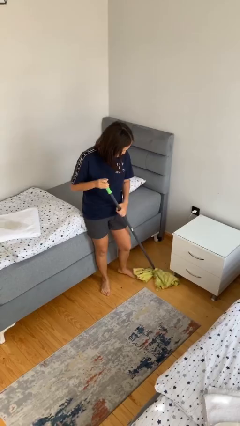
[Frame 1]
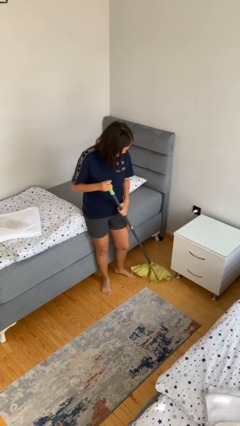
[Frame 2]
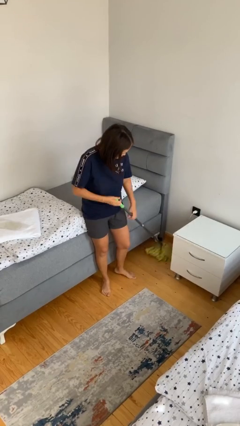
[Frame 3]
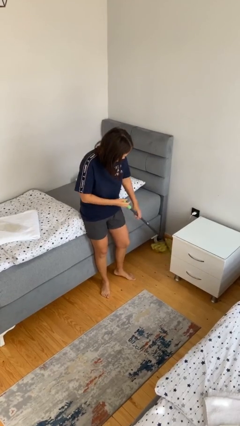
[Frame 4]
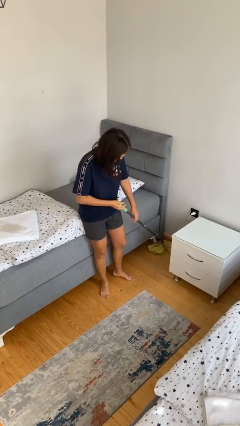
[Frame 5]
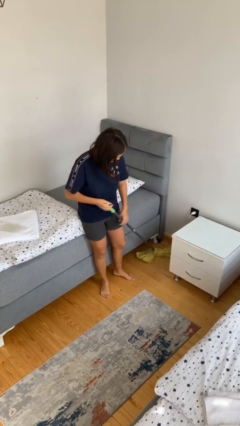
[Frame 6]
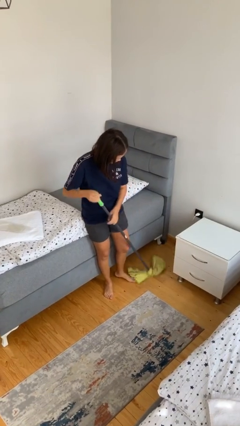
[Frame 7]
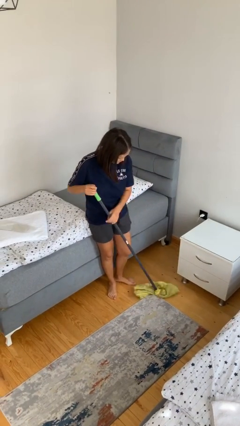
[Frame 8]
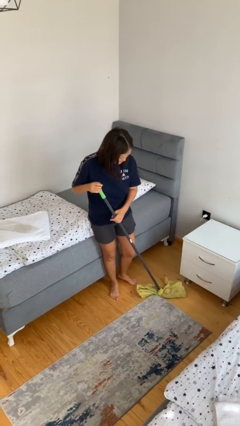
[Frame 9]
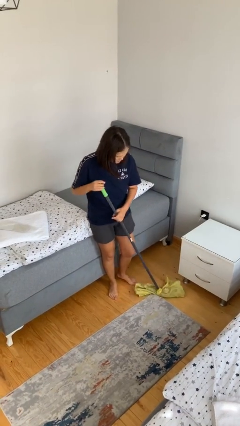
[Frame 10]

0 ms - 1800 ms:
person sweeps floor

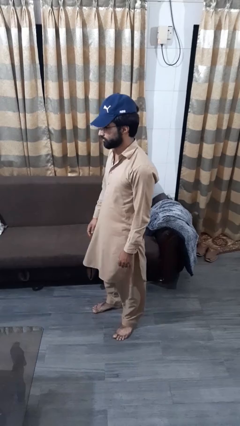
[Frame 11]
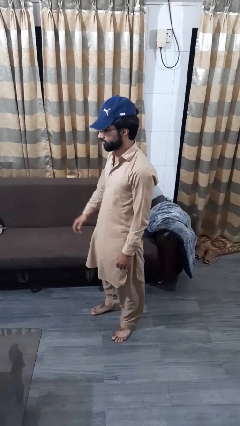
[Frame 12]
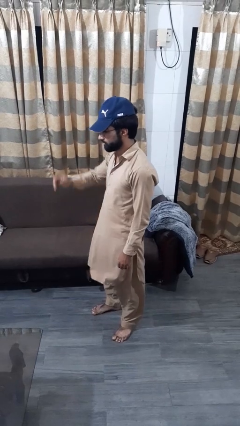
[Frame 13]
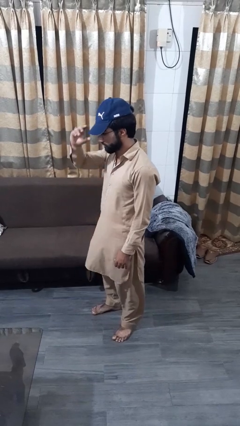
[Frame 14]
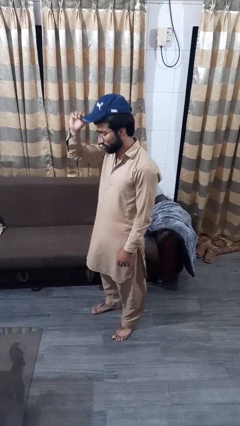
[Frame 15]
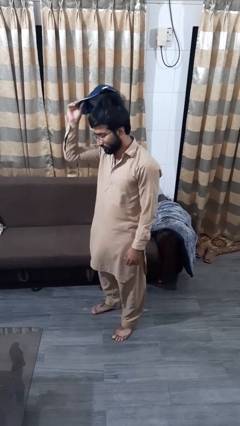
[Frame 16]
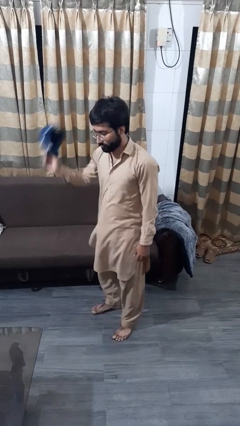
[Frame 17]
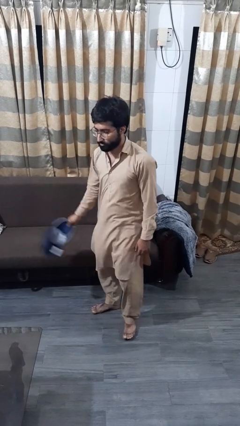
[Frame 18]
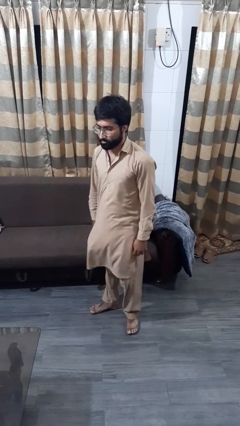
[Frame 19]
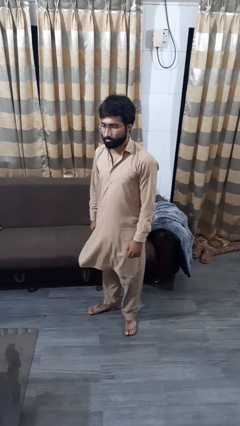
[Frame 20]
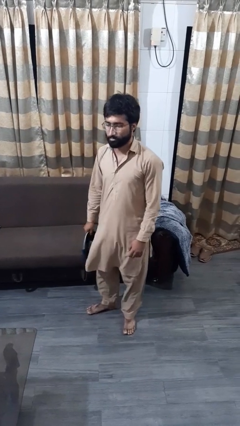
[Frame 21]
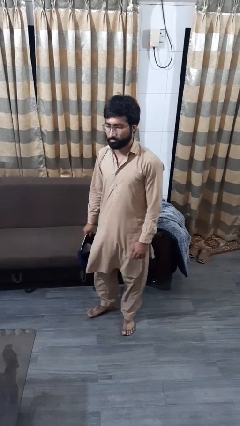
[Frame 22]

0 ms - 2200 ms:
person takes off hat

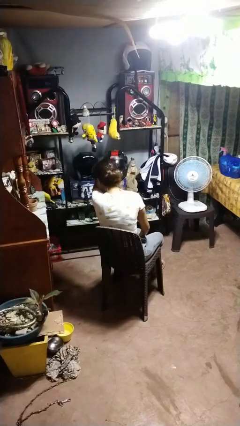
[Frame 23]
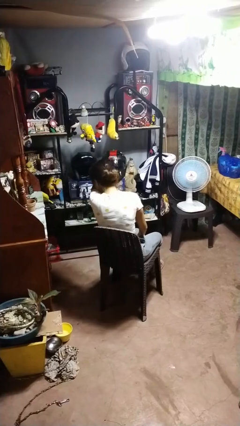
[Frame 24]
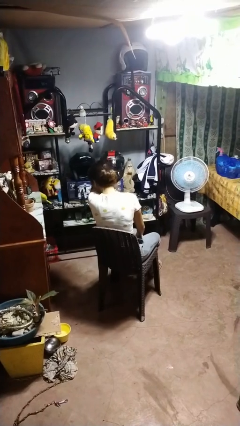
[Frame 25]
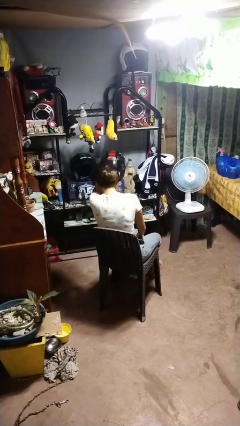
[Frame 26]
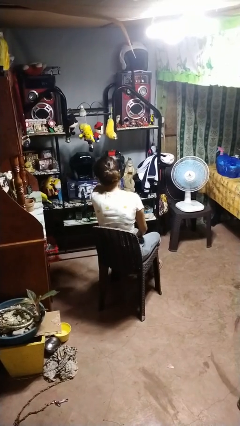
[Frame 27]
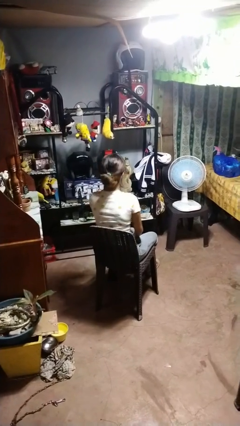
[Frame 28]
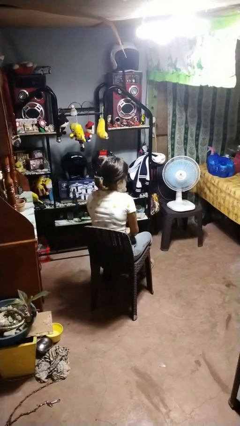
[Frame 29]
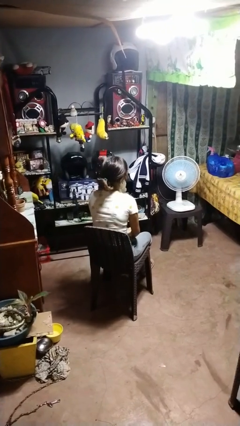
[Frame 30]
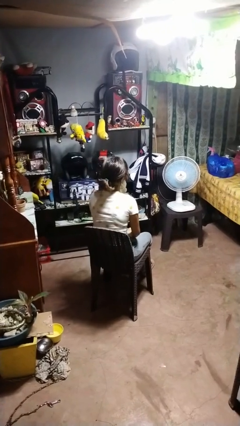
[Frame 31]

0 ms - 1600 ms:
person sneezes into arm

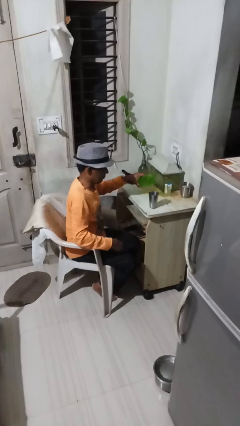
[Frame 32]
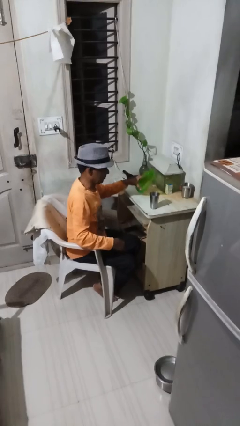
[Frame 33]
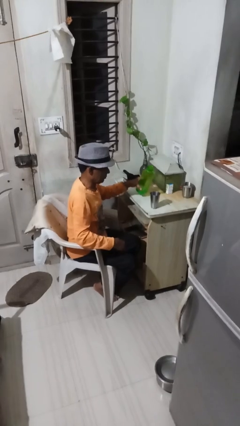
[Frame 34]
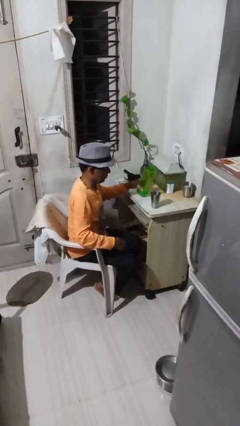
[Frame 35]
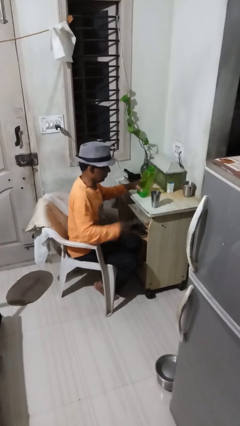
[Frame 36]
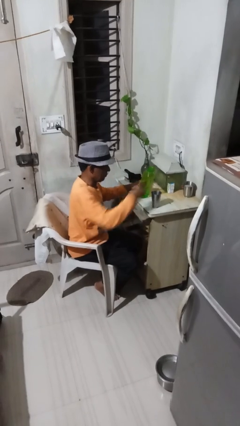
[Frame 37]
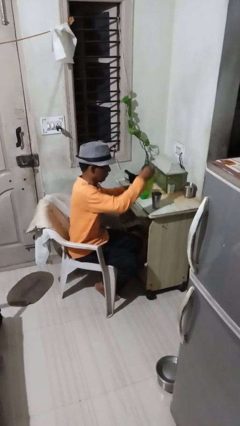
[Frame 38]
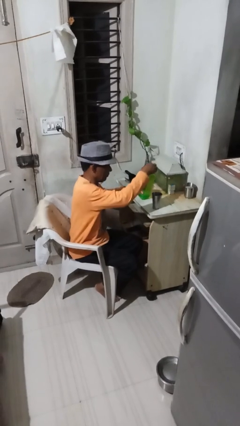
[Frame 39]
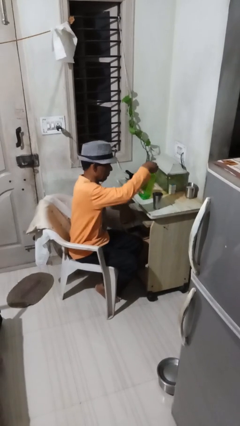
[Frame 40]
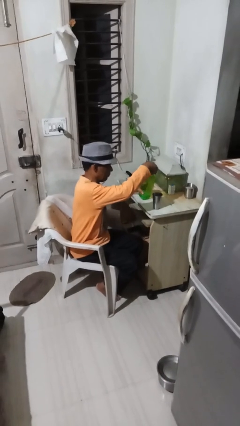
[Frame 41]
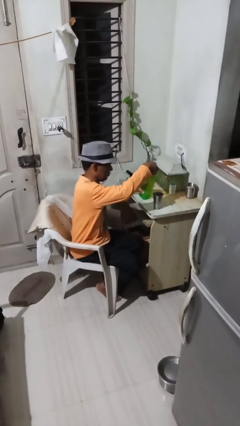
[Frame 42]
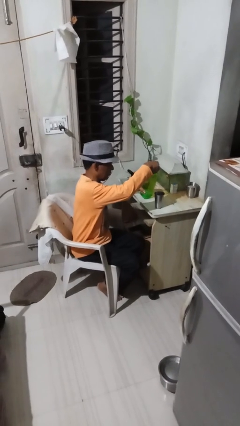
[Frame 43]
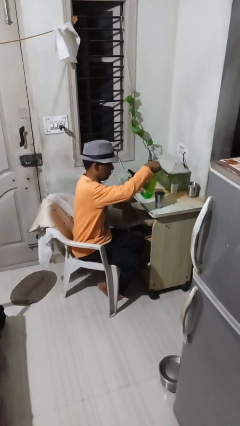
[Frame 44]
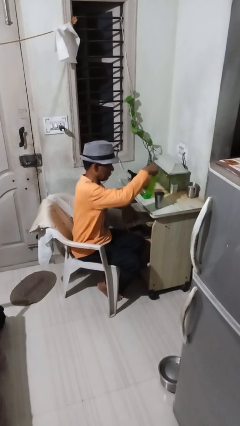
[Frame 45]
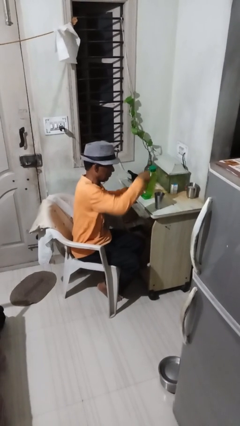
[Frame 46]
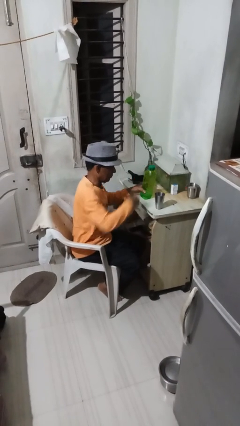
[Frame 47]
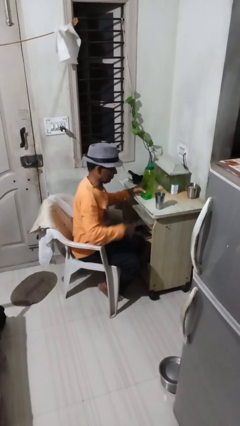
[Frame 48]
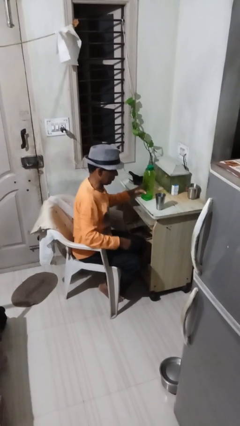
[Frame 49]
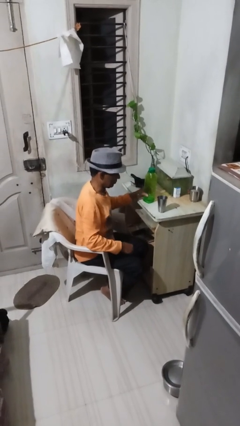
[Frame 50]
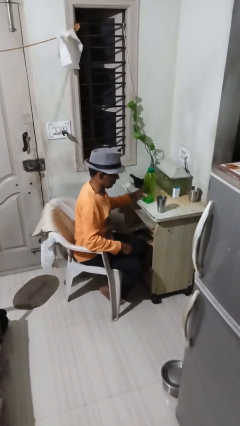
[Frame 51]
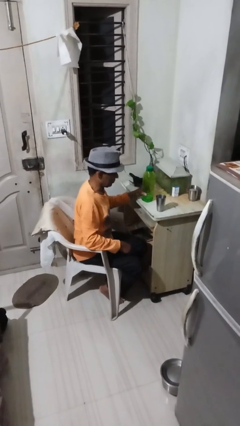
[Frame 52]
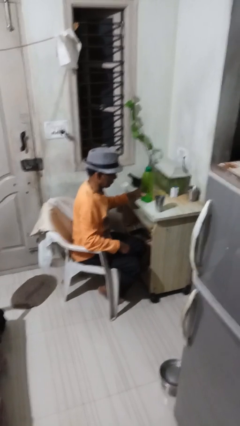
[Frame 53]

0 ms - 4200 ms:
person screws lid to bottle

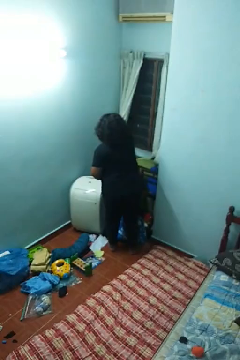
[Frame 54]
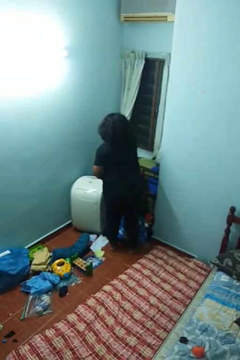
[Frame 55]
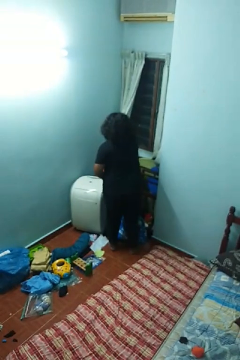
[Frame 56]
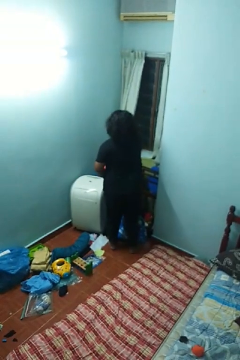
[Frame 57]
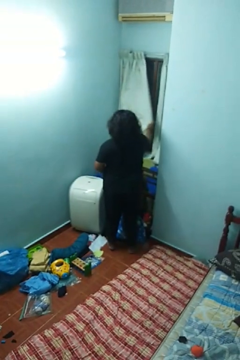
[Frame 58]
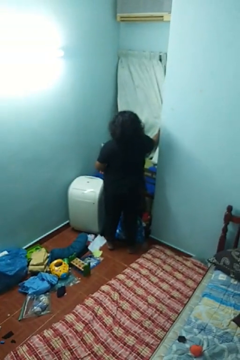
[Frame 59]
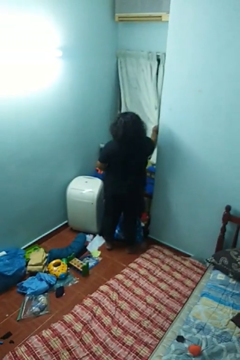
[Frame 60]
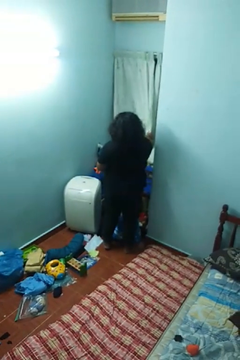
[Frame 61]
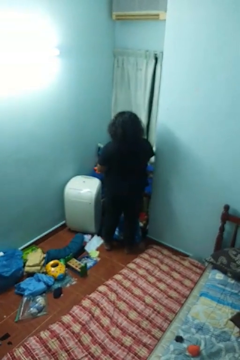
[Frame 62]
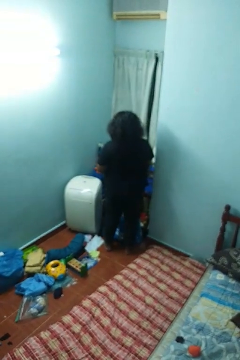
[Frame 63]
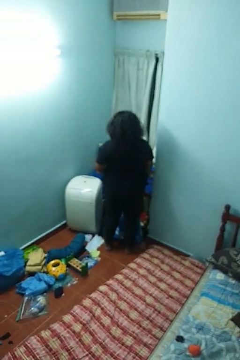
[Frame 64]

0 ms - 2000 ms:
person closes curtains

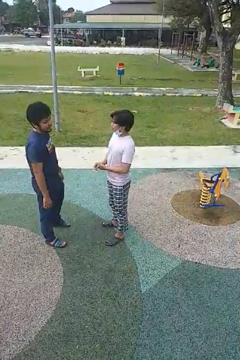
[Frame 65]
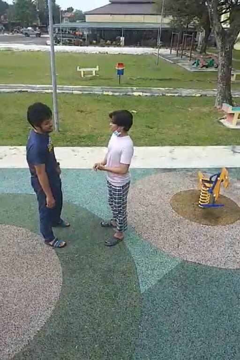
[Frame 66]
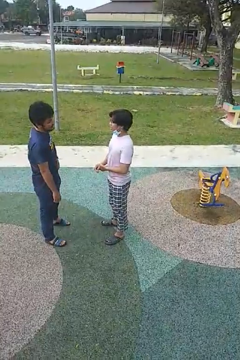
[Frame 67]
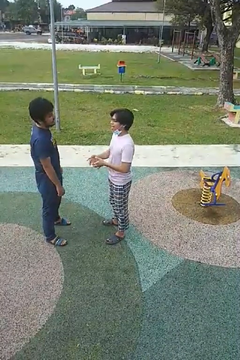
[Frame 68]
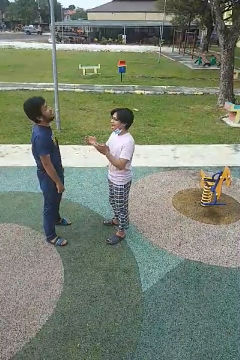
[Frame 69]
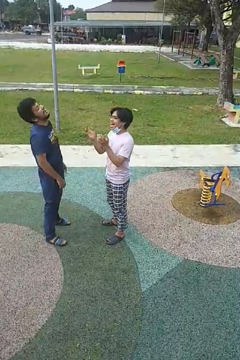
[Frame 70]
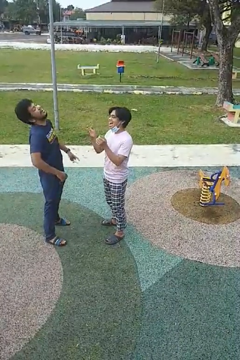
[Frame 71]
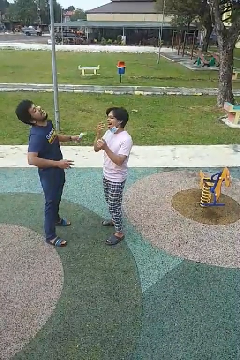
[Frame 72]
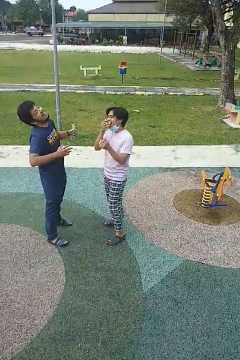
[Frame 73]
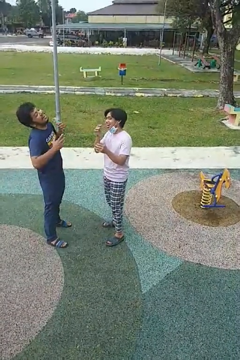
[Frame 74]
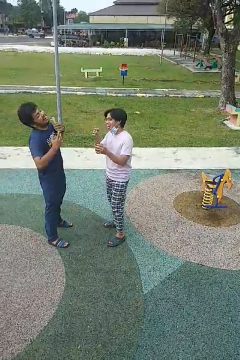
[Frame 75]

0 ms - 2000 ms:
person laughs with person

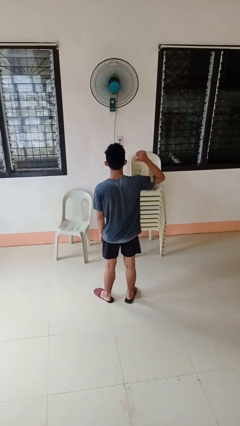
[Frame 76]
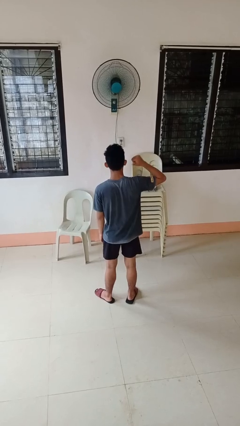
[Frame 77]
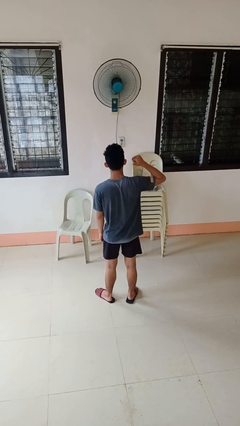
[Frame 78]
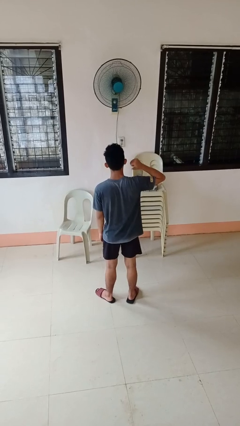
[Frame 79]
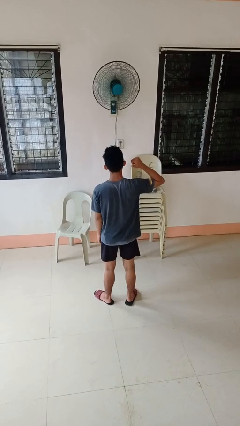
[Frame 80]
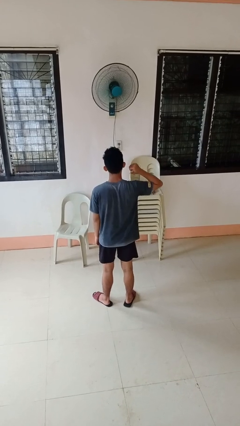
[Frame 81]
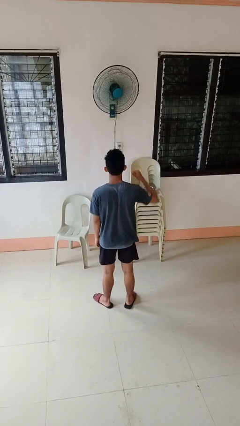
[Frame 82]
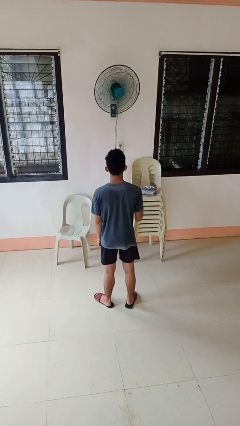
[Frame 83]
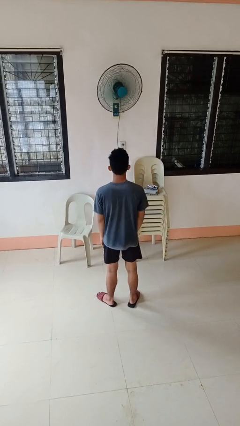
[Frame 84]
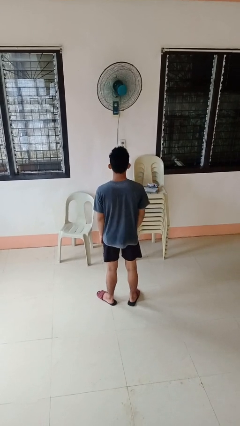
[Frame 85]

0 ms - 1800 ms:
person gestures behind me

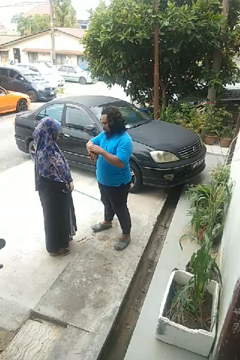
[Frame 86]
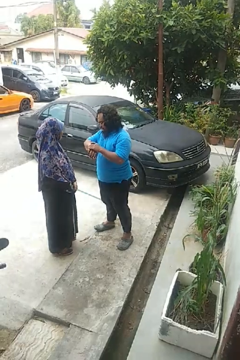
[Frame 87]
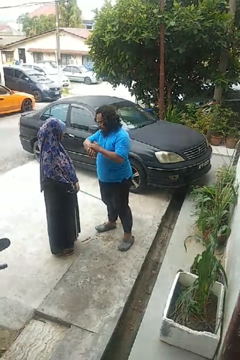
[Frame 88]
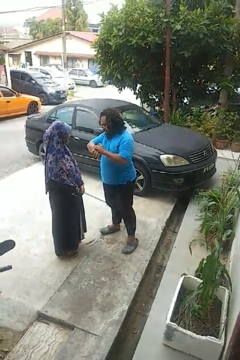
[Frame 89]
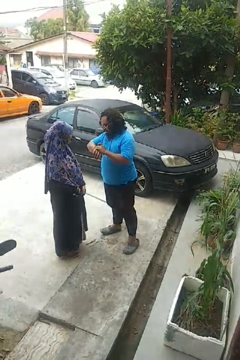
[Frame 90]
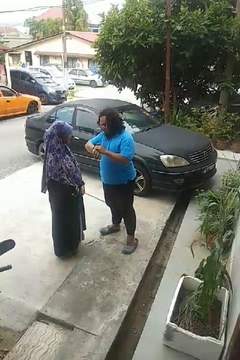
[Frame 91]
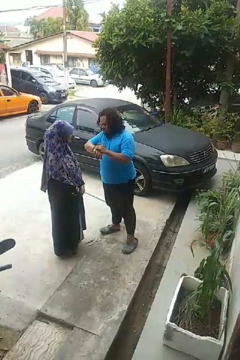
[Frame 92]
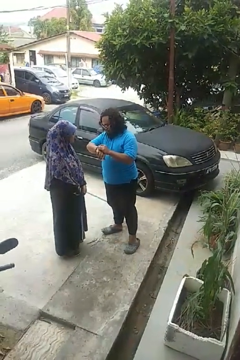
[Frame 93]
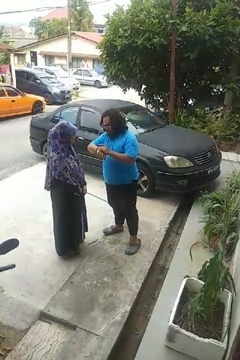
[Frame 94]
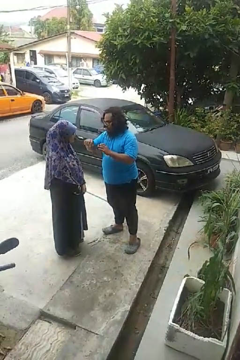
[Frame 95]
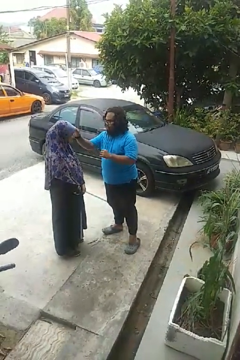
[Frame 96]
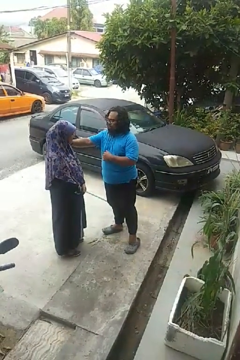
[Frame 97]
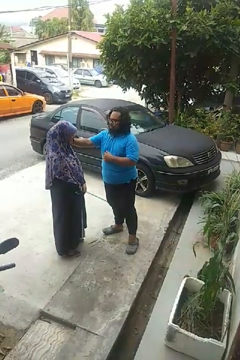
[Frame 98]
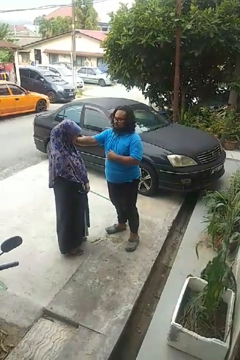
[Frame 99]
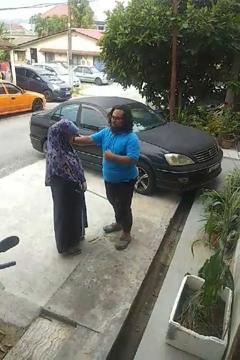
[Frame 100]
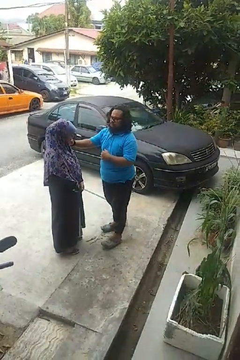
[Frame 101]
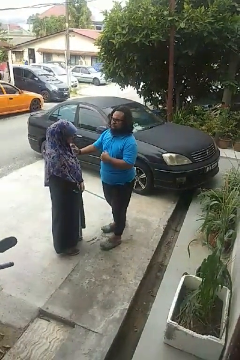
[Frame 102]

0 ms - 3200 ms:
person pounds shoulders of person
